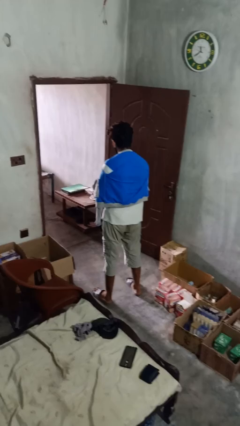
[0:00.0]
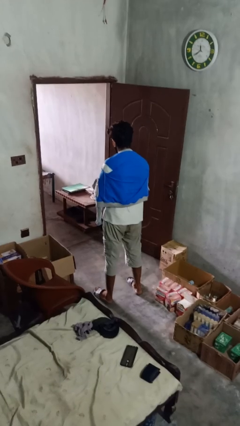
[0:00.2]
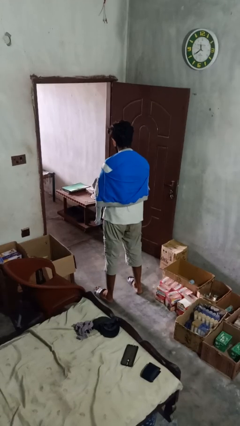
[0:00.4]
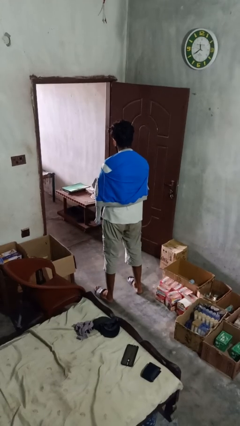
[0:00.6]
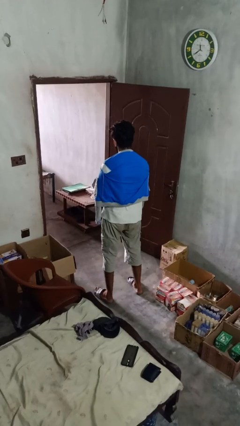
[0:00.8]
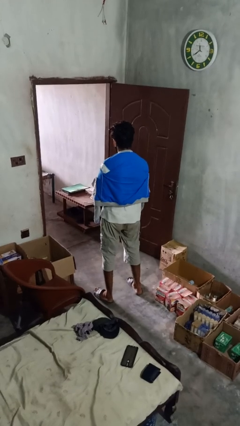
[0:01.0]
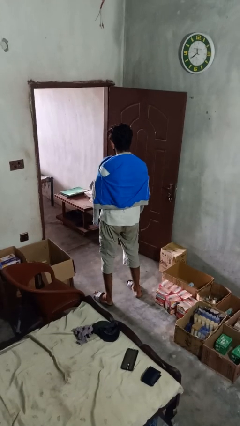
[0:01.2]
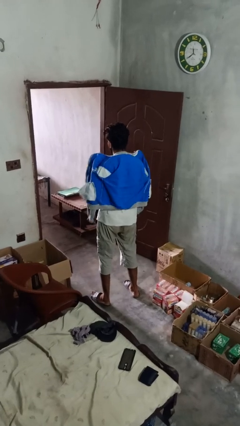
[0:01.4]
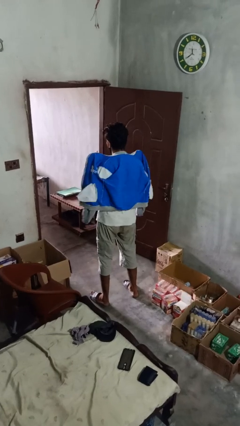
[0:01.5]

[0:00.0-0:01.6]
person unzips jacket

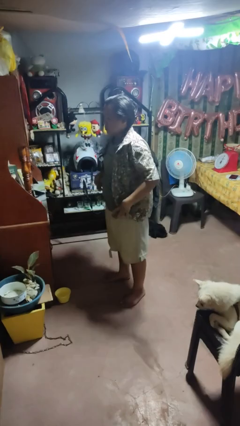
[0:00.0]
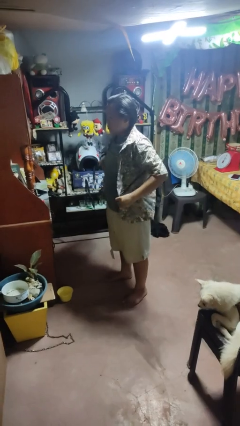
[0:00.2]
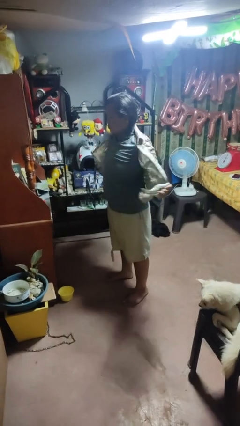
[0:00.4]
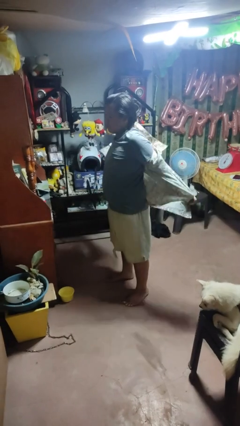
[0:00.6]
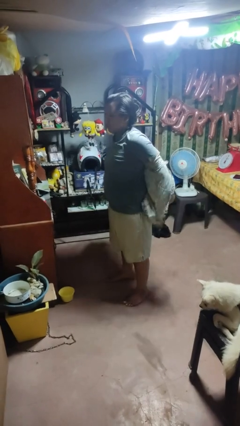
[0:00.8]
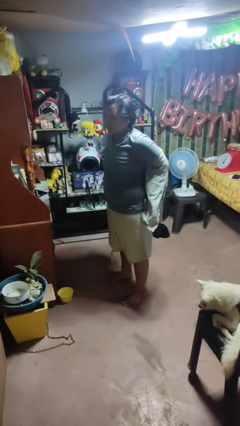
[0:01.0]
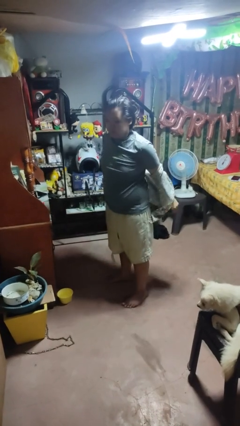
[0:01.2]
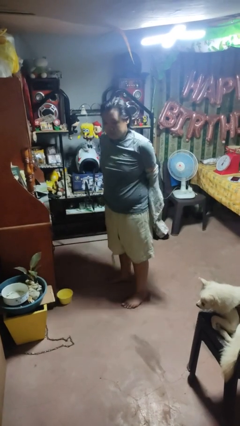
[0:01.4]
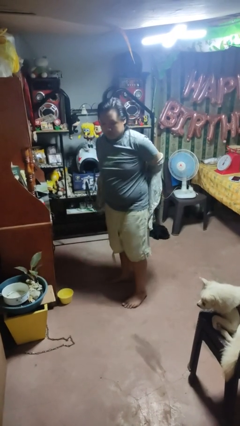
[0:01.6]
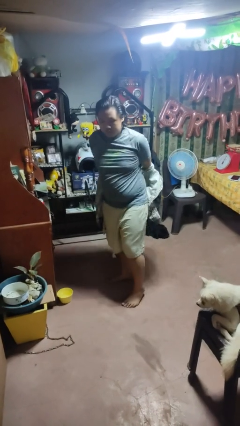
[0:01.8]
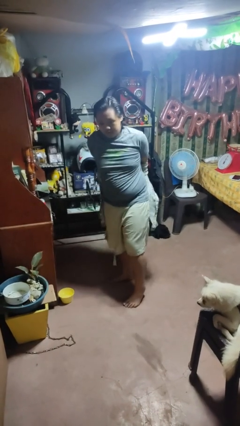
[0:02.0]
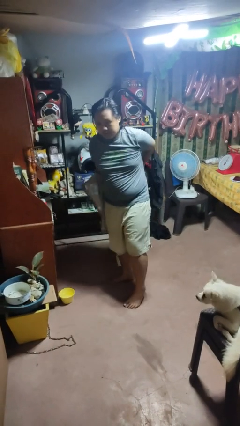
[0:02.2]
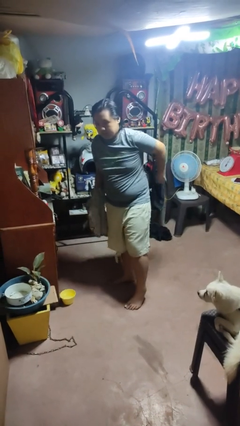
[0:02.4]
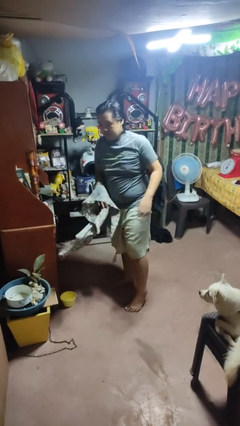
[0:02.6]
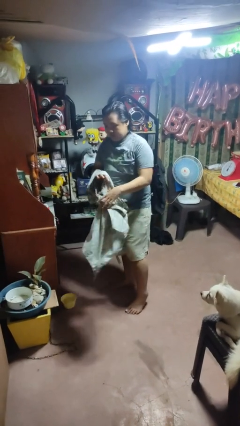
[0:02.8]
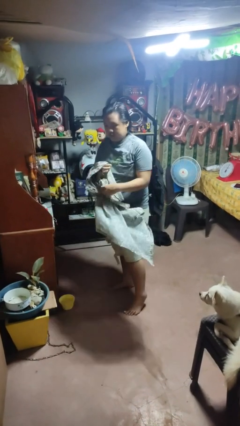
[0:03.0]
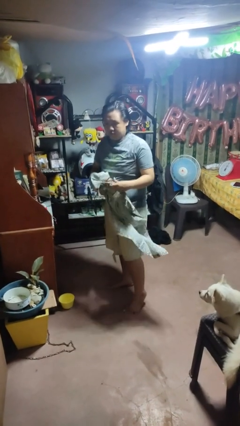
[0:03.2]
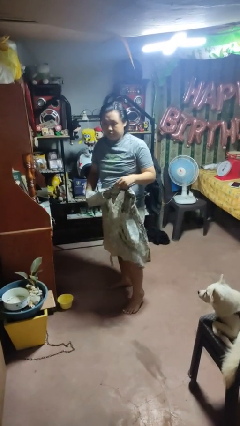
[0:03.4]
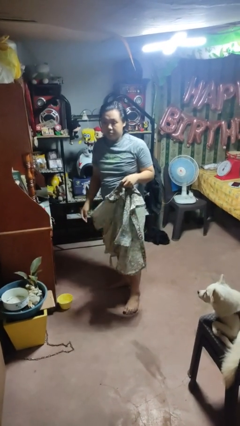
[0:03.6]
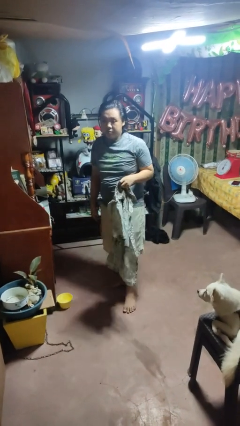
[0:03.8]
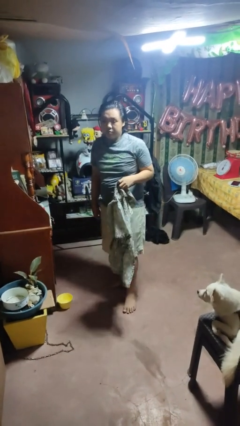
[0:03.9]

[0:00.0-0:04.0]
person takes off shirt

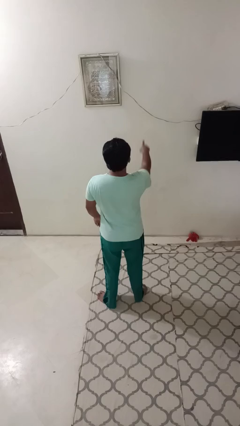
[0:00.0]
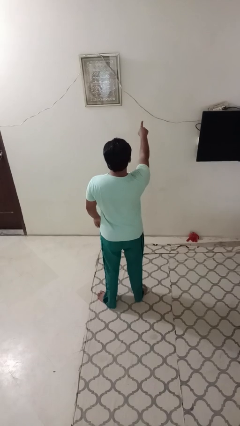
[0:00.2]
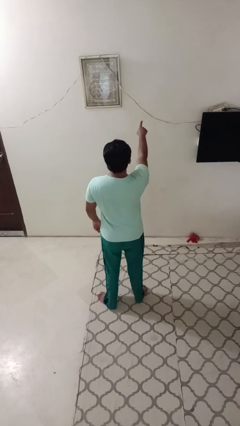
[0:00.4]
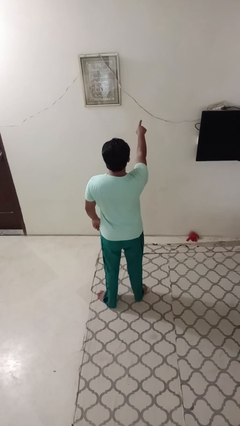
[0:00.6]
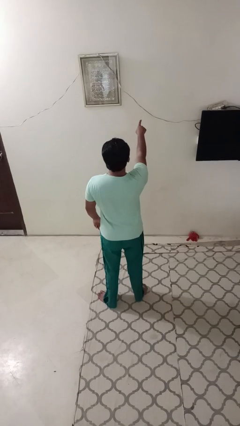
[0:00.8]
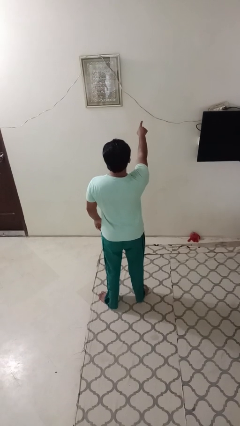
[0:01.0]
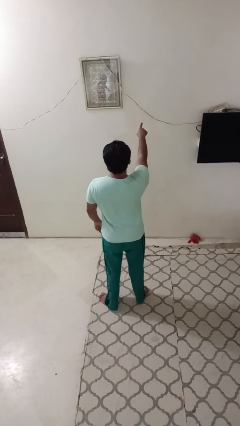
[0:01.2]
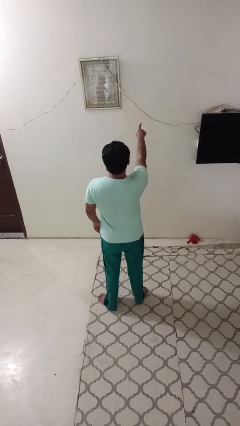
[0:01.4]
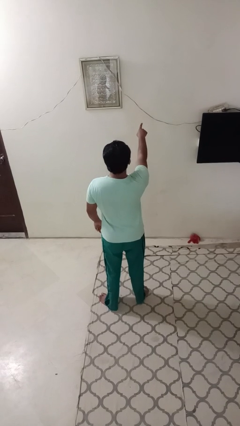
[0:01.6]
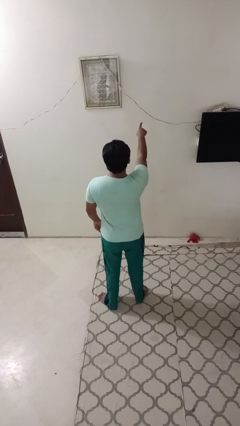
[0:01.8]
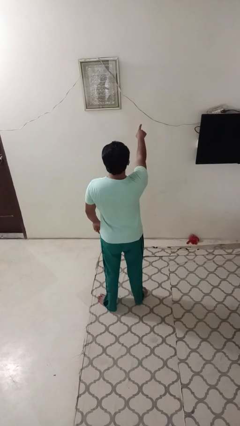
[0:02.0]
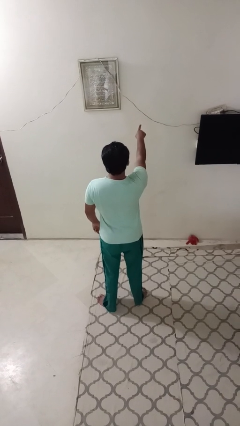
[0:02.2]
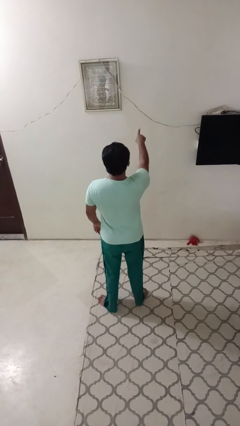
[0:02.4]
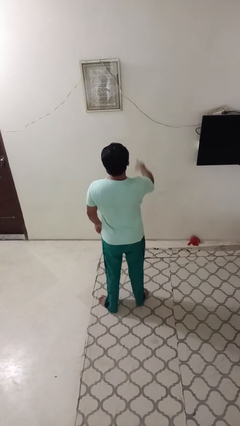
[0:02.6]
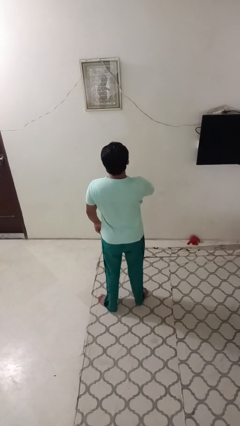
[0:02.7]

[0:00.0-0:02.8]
person points at person

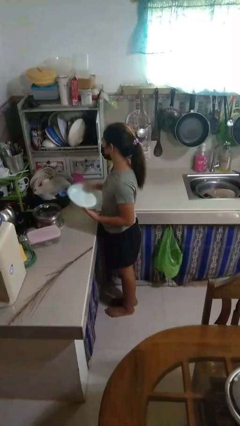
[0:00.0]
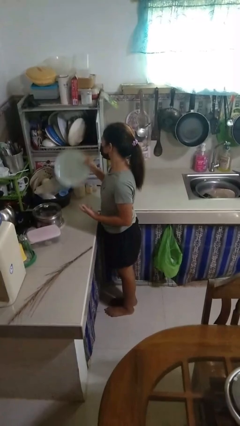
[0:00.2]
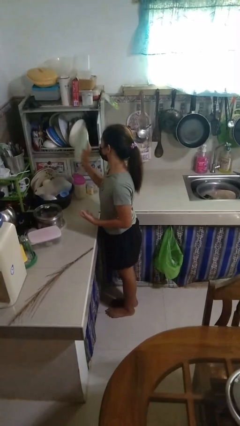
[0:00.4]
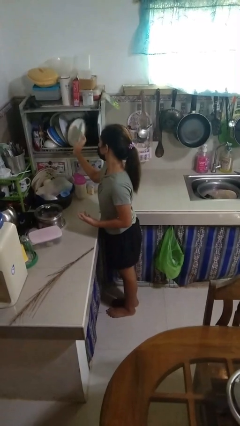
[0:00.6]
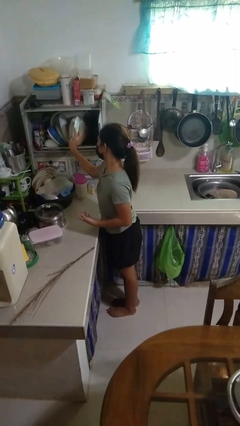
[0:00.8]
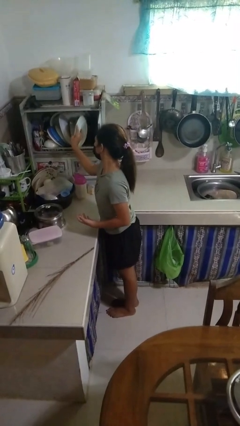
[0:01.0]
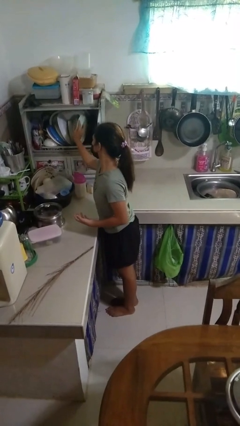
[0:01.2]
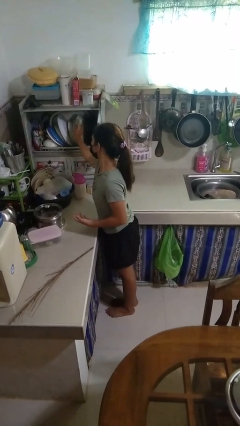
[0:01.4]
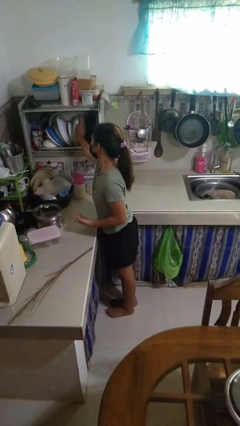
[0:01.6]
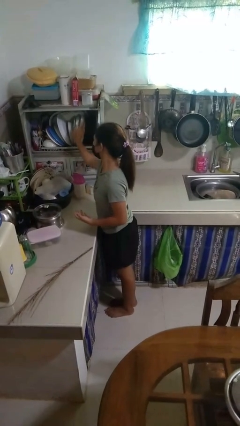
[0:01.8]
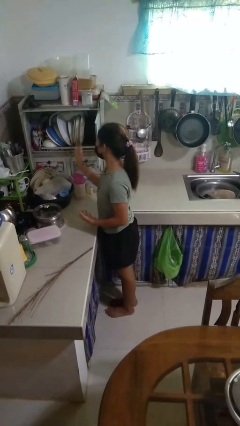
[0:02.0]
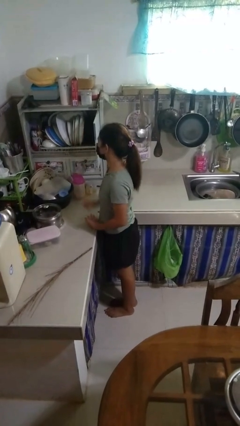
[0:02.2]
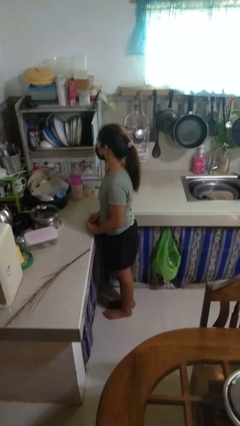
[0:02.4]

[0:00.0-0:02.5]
person puts object into kitchen drawer

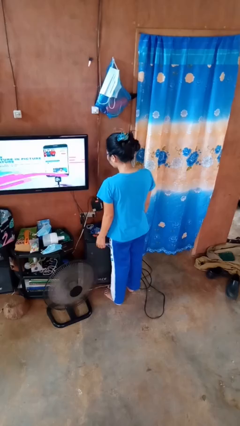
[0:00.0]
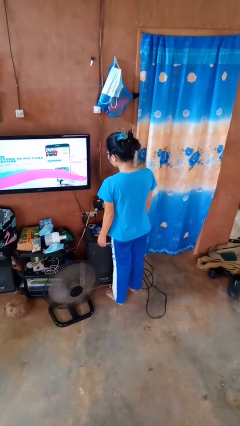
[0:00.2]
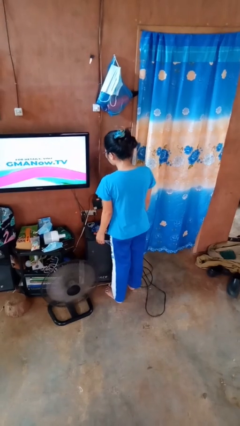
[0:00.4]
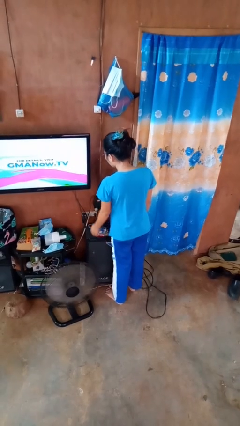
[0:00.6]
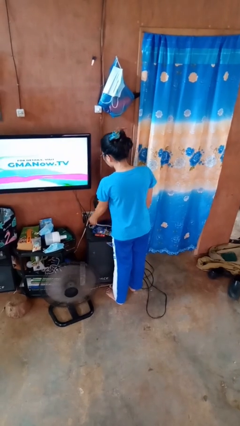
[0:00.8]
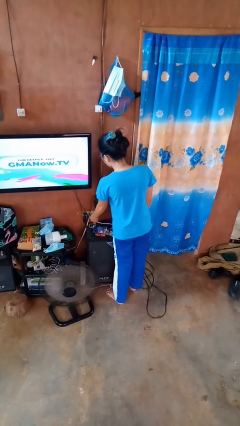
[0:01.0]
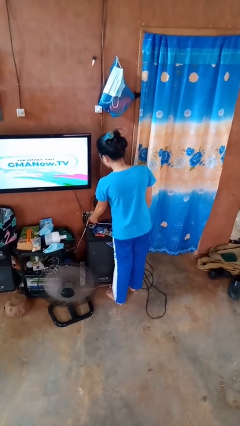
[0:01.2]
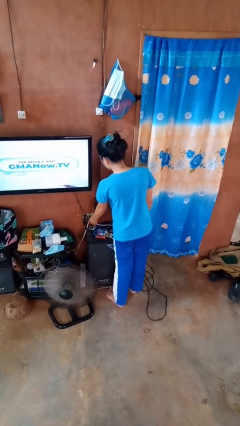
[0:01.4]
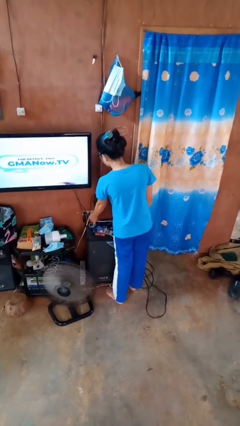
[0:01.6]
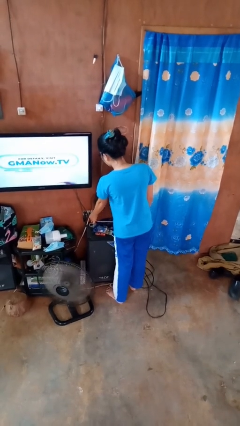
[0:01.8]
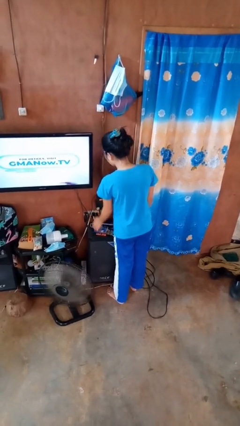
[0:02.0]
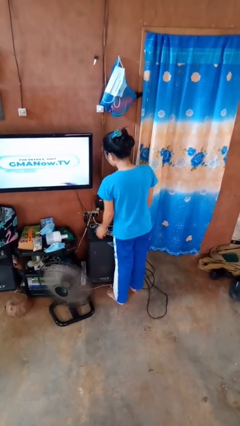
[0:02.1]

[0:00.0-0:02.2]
person plugs into electrical socket

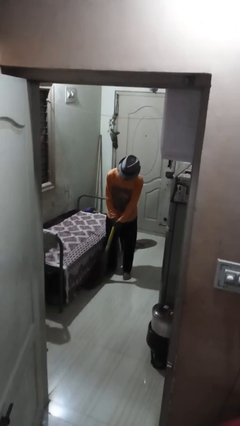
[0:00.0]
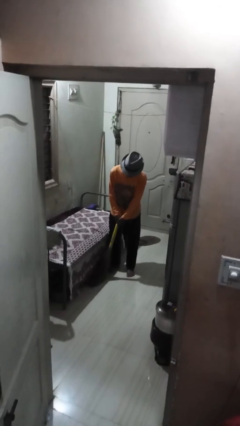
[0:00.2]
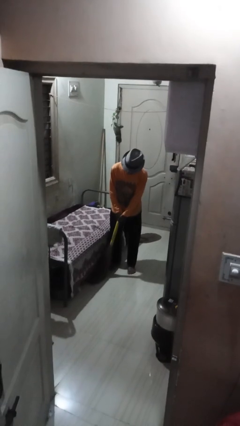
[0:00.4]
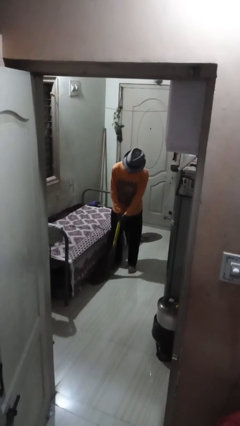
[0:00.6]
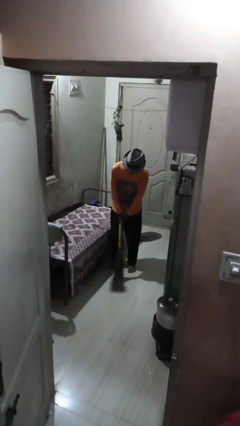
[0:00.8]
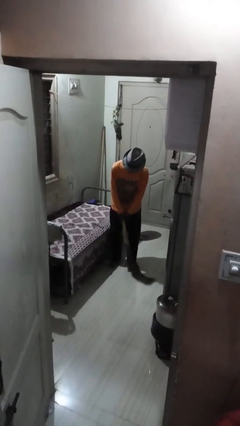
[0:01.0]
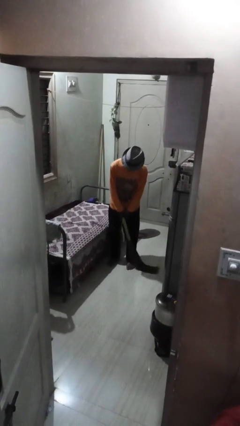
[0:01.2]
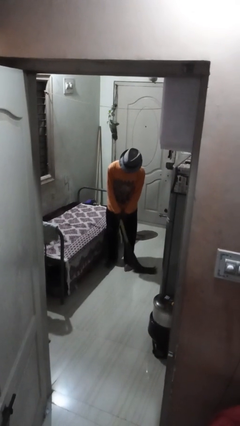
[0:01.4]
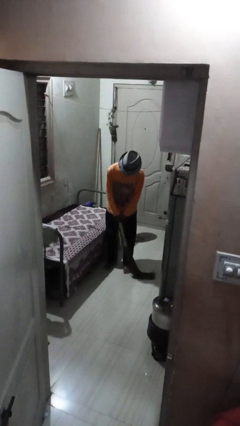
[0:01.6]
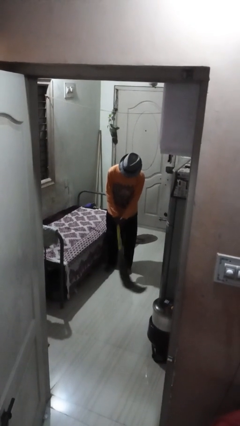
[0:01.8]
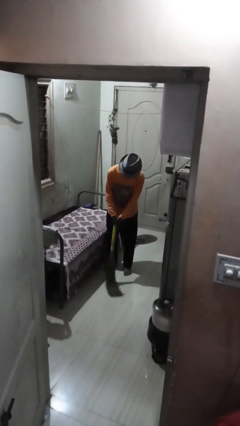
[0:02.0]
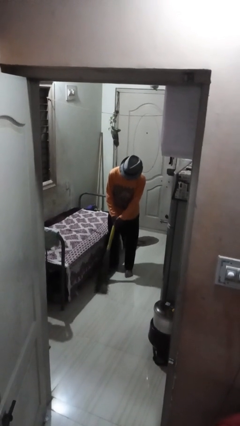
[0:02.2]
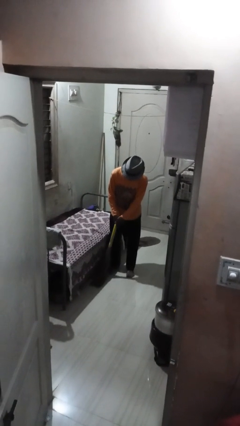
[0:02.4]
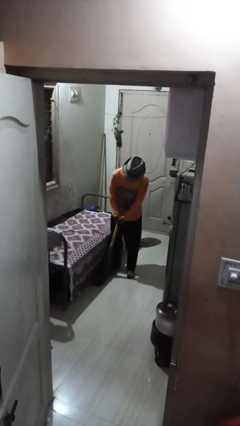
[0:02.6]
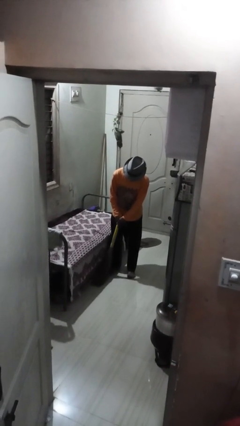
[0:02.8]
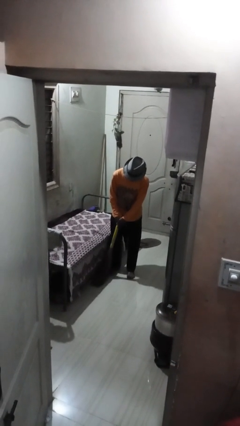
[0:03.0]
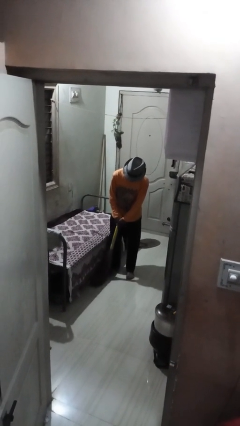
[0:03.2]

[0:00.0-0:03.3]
person sweeps floor

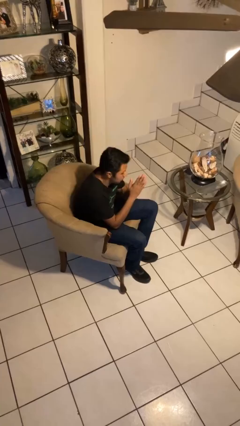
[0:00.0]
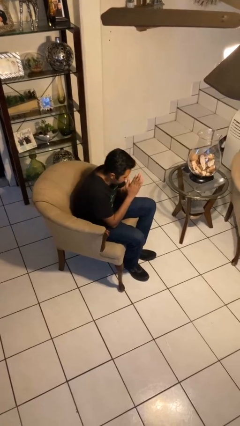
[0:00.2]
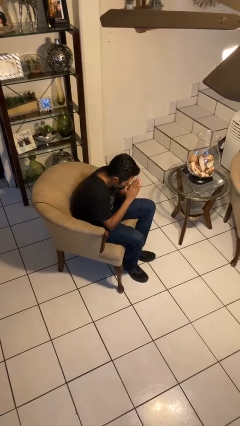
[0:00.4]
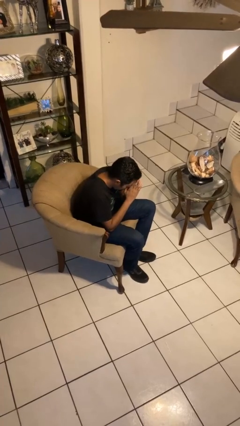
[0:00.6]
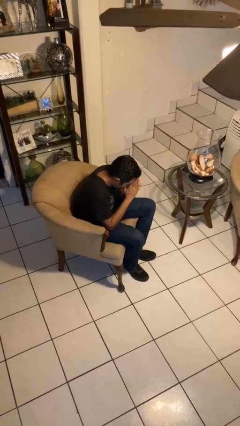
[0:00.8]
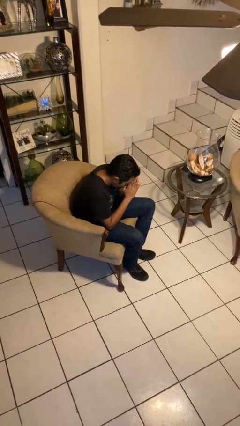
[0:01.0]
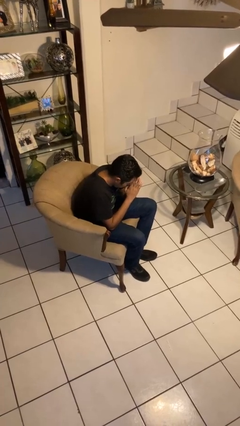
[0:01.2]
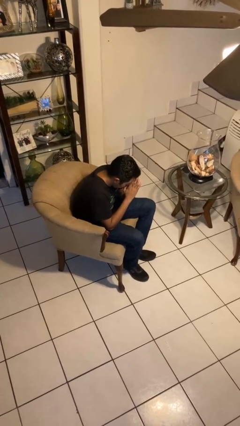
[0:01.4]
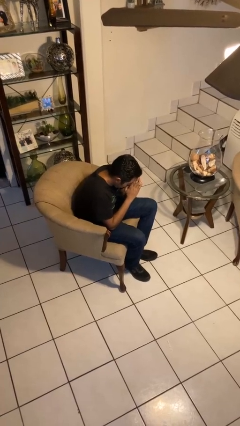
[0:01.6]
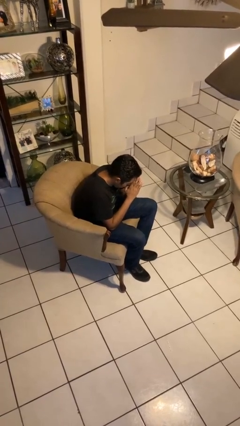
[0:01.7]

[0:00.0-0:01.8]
person prays
